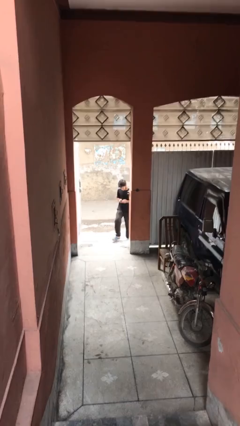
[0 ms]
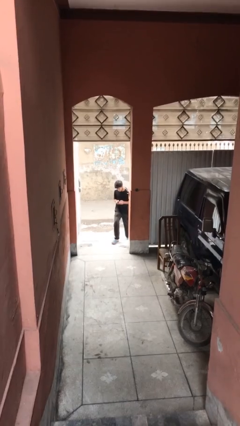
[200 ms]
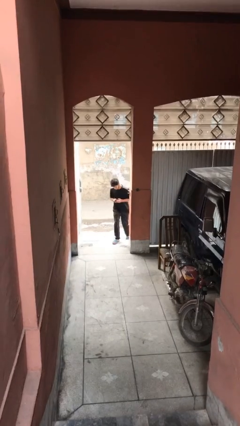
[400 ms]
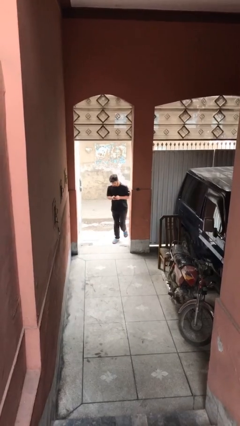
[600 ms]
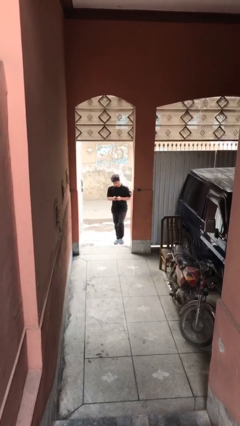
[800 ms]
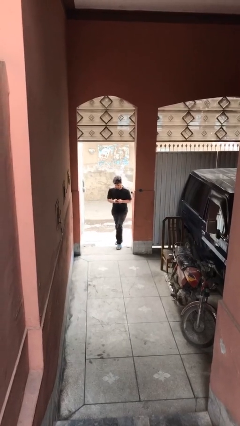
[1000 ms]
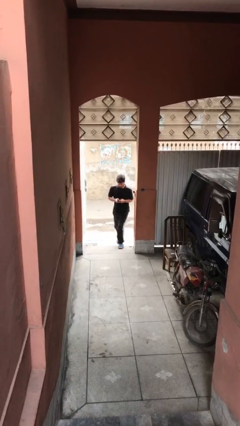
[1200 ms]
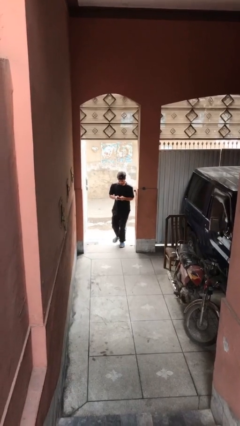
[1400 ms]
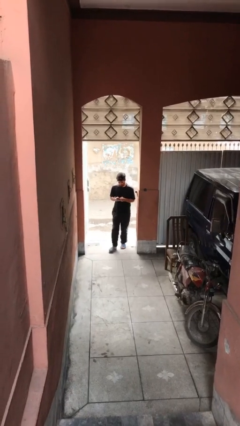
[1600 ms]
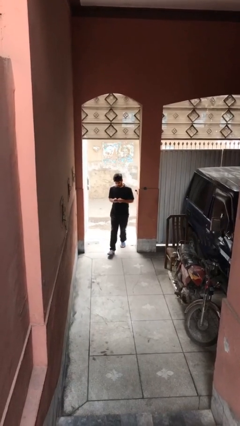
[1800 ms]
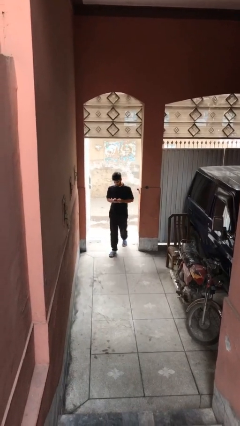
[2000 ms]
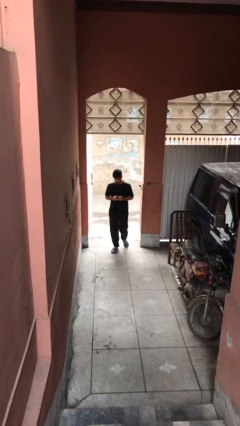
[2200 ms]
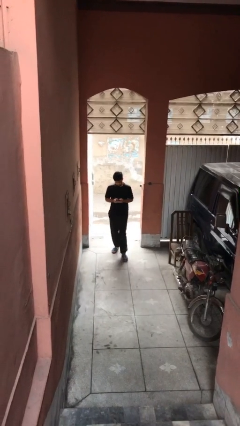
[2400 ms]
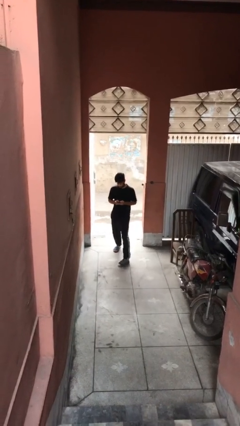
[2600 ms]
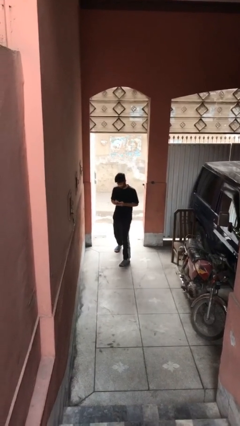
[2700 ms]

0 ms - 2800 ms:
person enters scene through structure

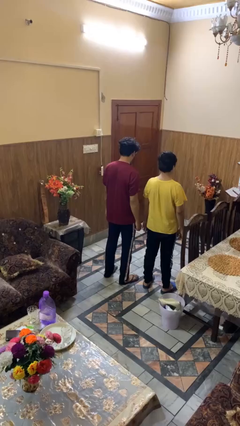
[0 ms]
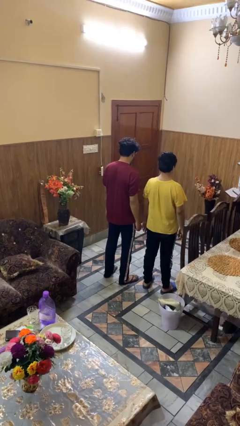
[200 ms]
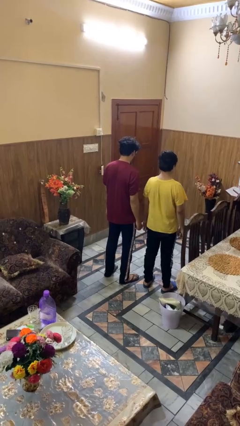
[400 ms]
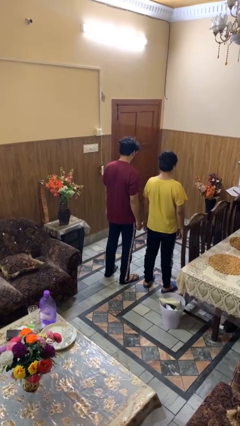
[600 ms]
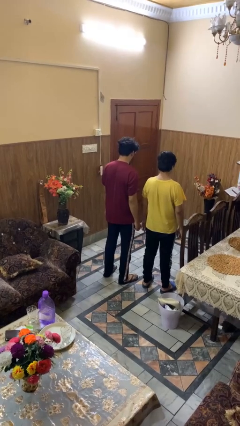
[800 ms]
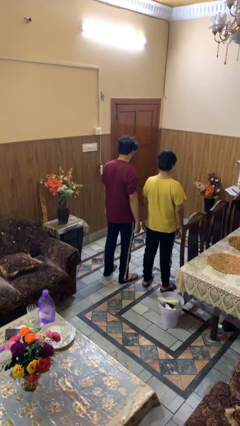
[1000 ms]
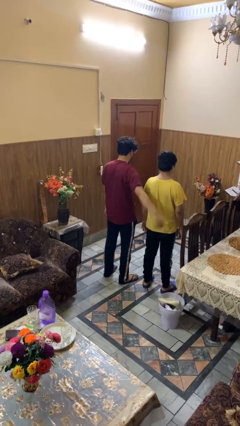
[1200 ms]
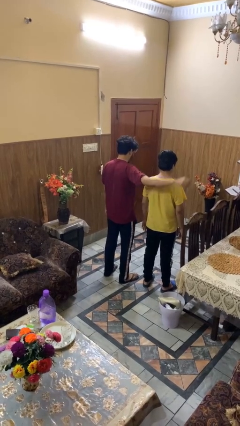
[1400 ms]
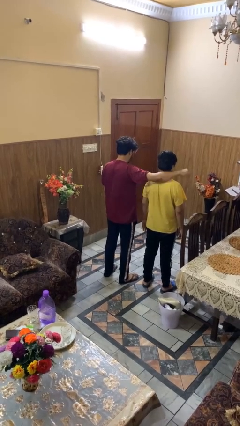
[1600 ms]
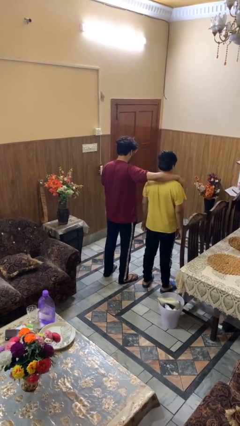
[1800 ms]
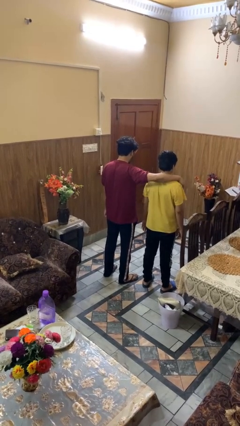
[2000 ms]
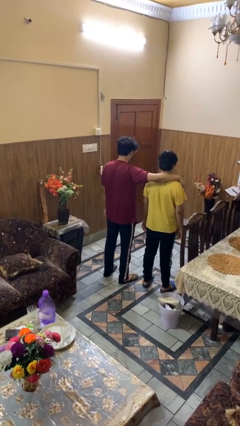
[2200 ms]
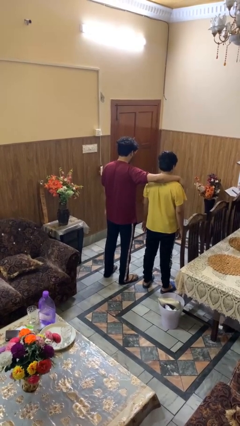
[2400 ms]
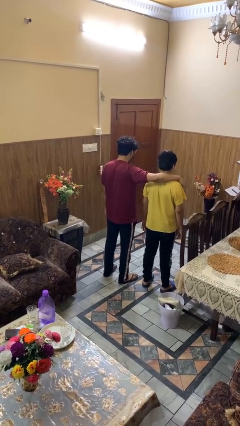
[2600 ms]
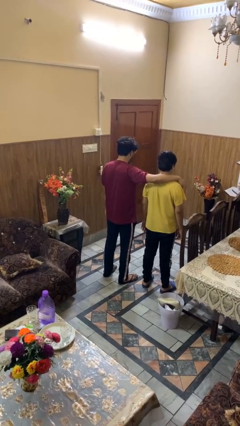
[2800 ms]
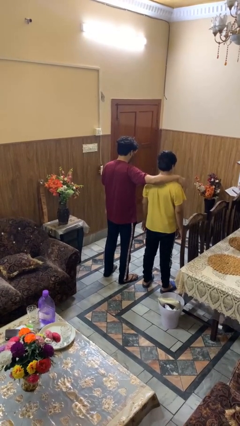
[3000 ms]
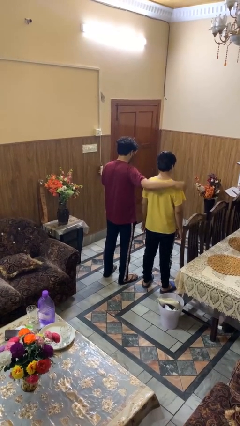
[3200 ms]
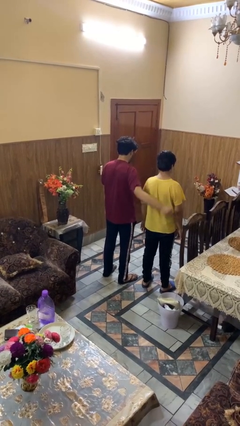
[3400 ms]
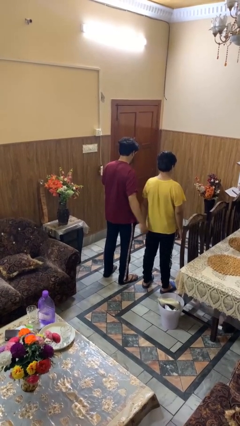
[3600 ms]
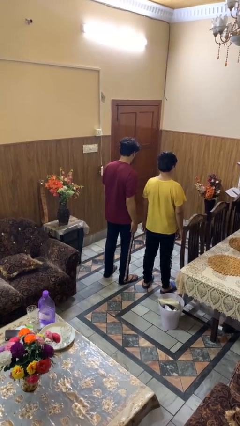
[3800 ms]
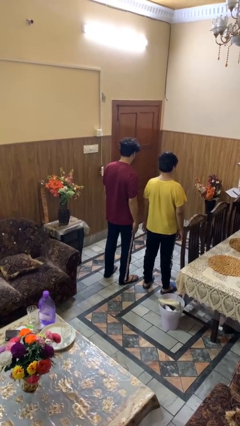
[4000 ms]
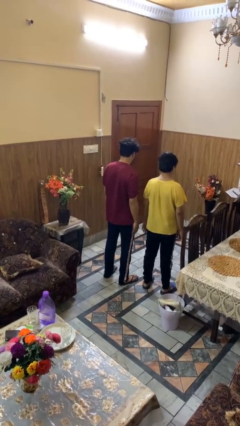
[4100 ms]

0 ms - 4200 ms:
person pounds shoulders of person

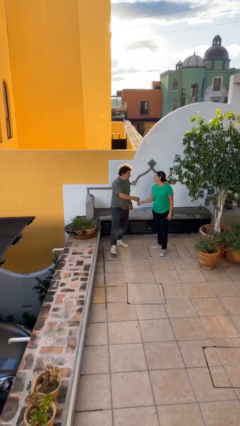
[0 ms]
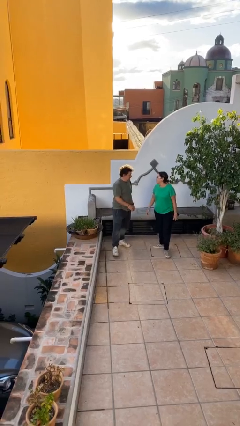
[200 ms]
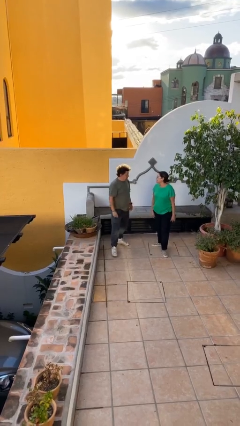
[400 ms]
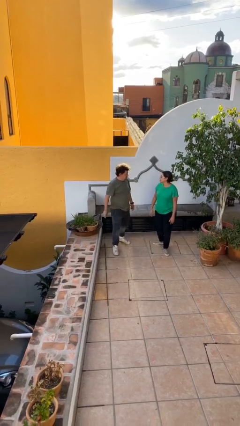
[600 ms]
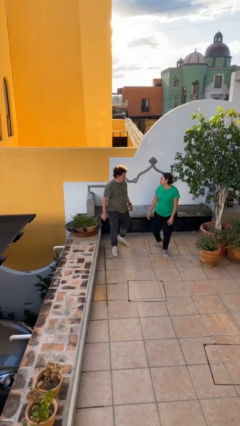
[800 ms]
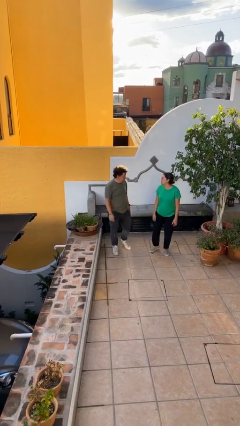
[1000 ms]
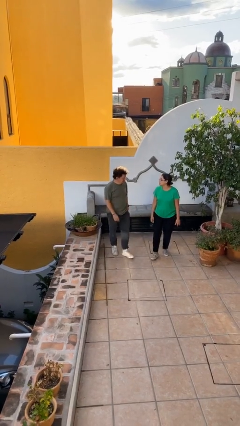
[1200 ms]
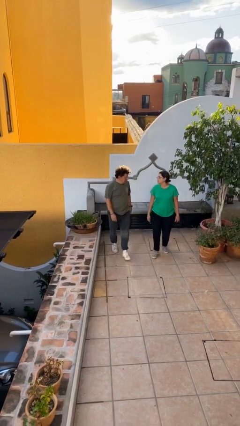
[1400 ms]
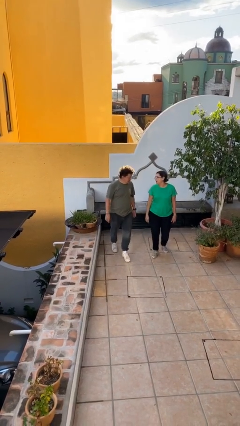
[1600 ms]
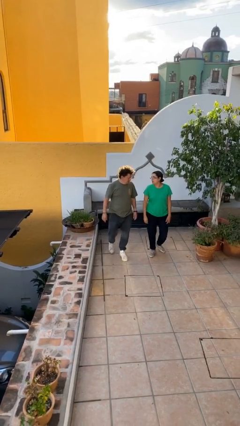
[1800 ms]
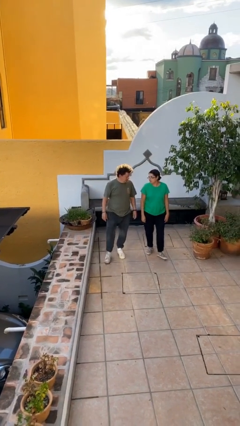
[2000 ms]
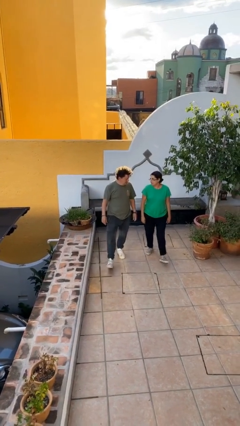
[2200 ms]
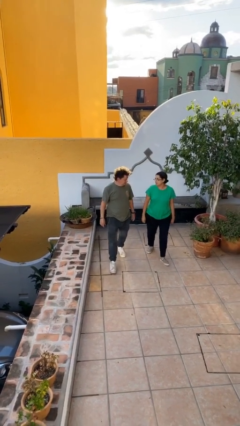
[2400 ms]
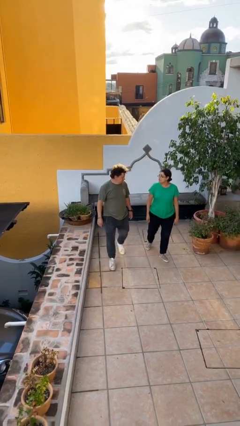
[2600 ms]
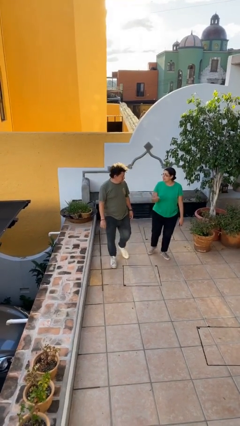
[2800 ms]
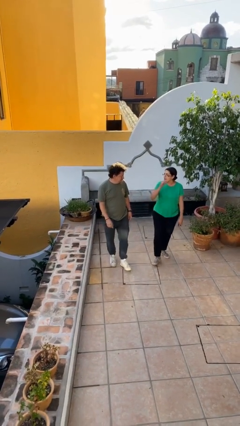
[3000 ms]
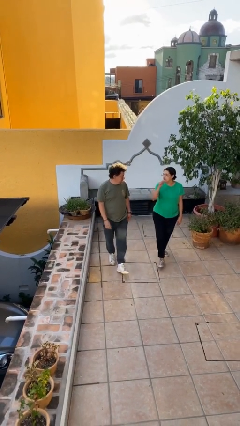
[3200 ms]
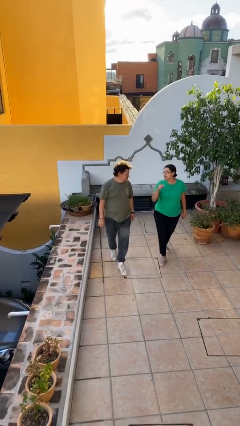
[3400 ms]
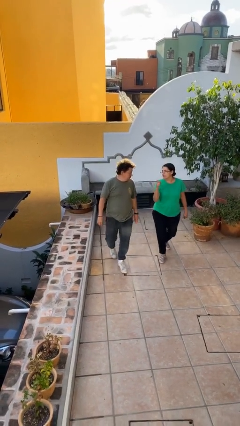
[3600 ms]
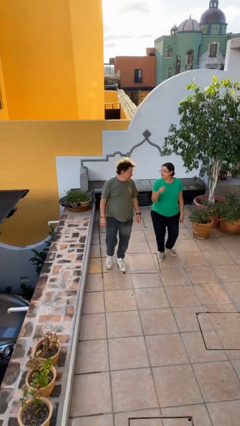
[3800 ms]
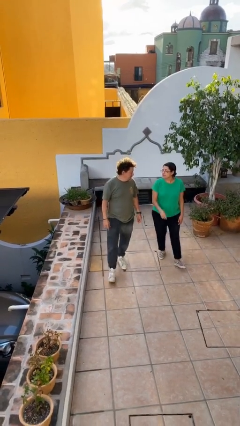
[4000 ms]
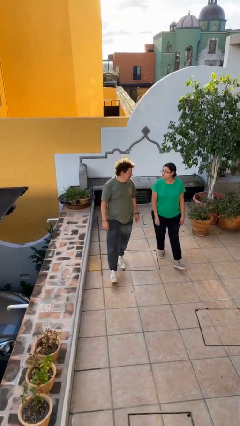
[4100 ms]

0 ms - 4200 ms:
person talks to person

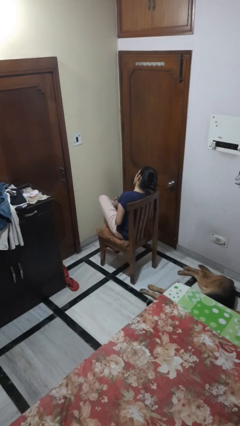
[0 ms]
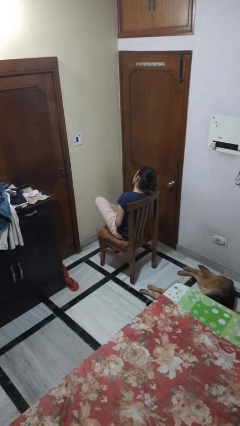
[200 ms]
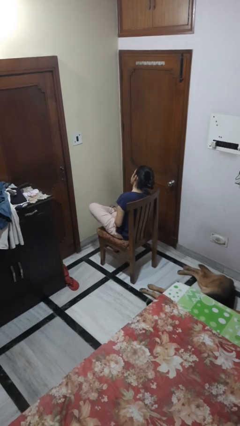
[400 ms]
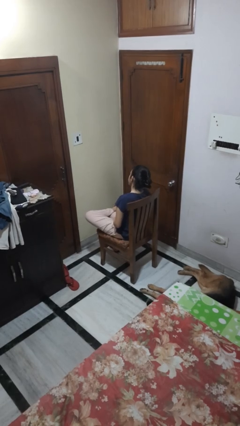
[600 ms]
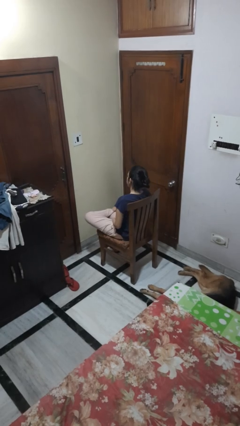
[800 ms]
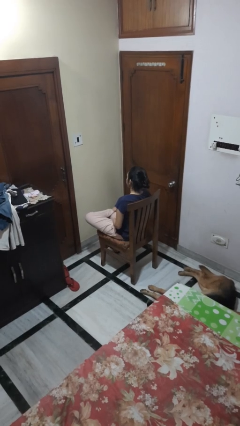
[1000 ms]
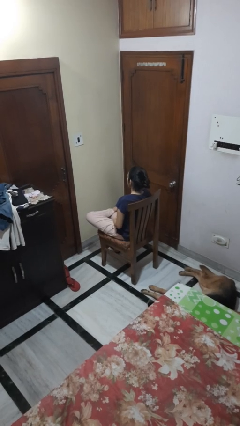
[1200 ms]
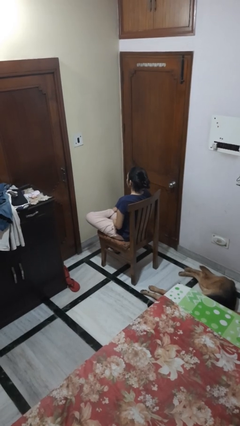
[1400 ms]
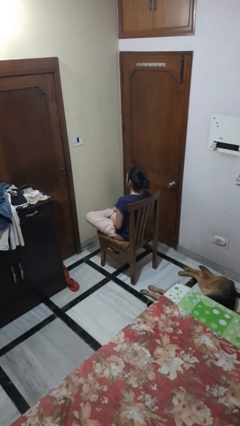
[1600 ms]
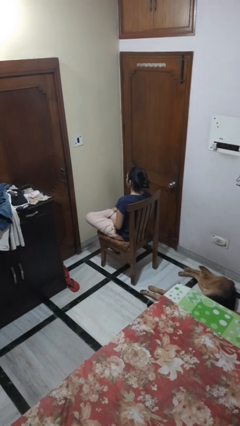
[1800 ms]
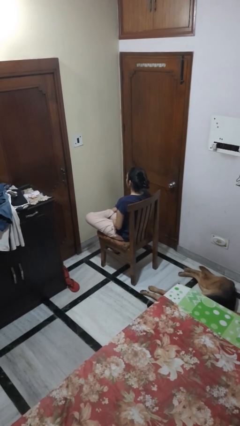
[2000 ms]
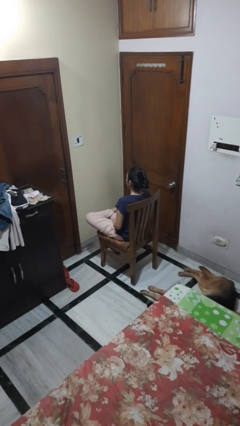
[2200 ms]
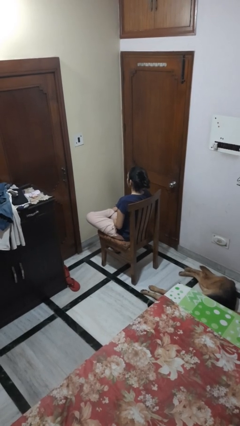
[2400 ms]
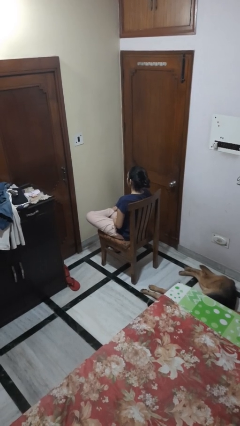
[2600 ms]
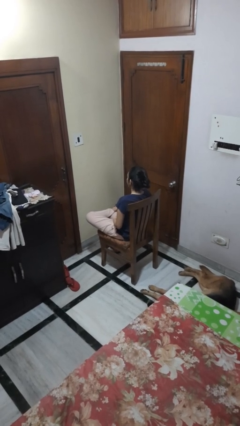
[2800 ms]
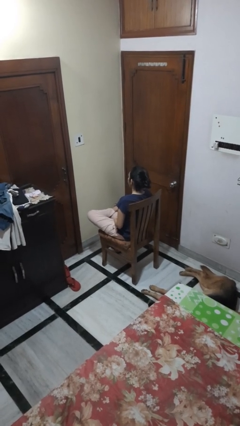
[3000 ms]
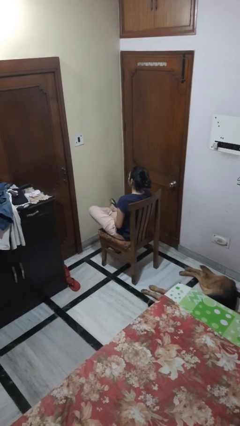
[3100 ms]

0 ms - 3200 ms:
person crosses legs

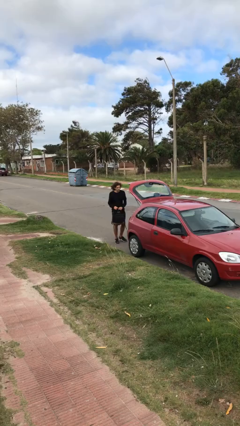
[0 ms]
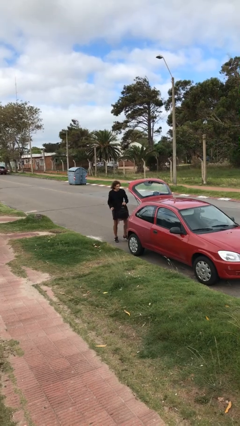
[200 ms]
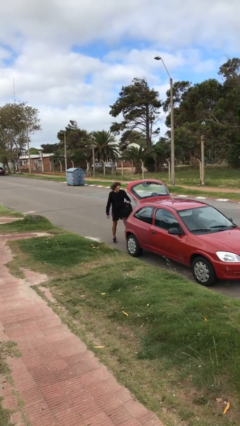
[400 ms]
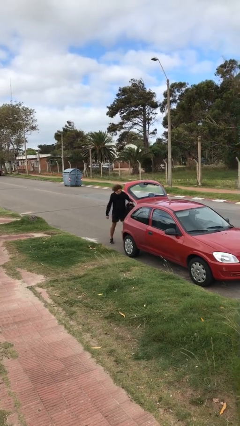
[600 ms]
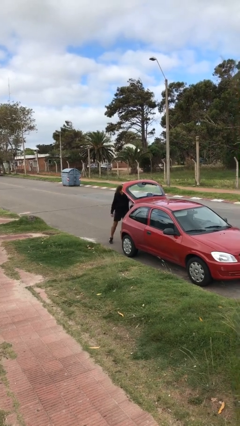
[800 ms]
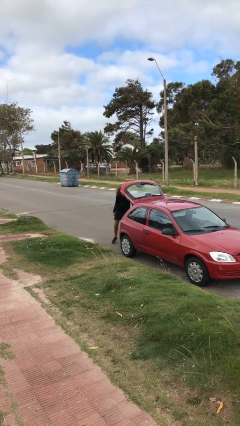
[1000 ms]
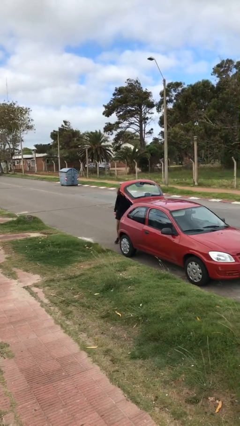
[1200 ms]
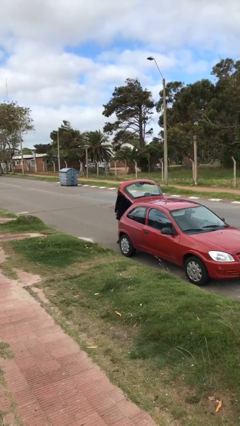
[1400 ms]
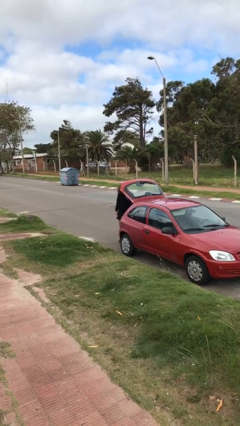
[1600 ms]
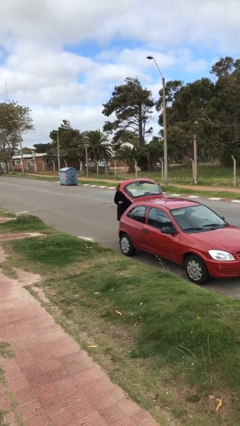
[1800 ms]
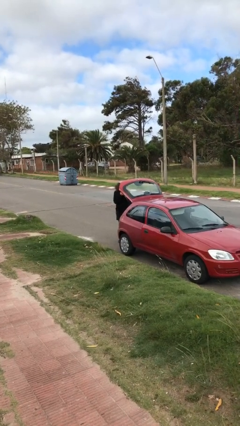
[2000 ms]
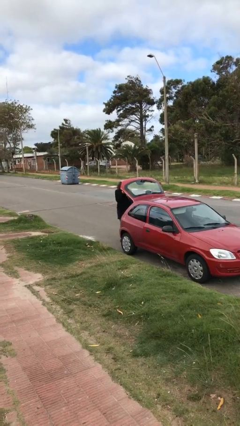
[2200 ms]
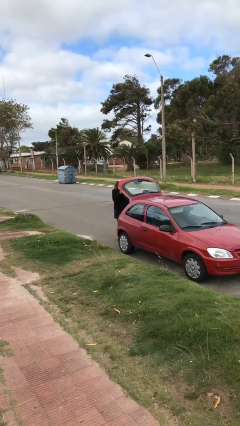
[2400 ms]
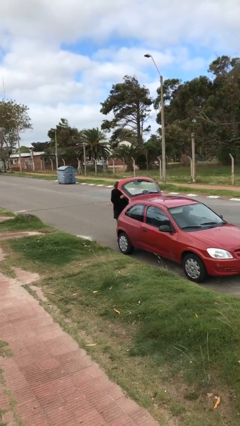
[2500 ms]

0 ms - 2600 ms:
person loads car

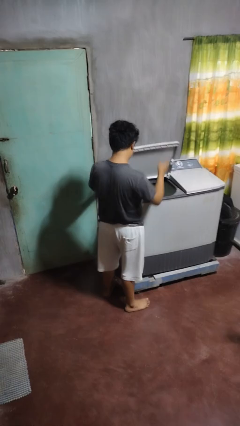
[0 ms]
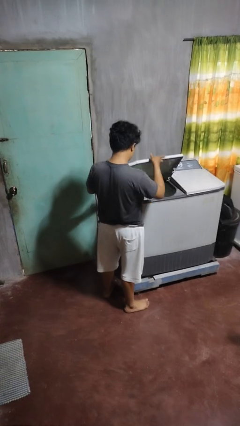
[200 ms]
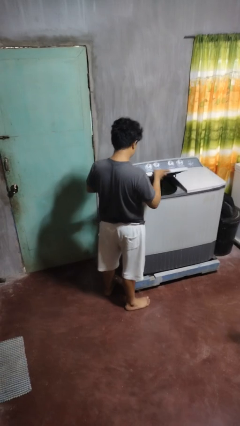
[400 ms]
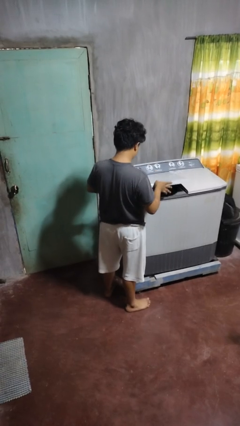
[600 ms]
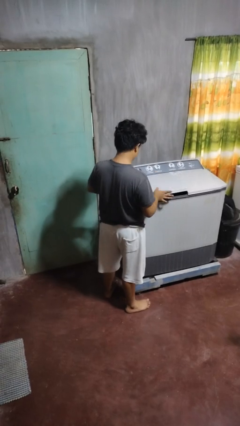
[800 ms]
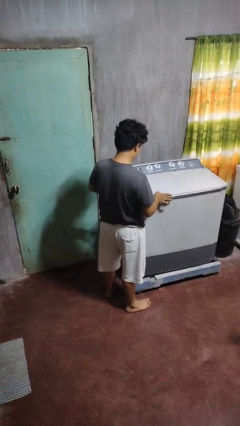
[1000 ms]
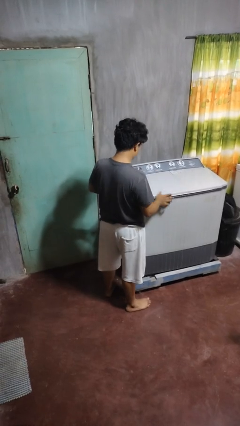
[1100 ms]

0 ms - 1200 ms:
person closes clothes washer
